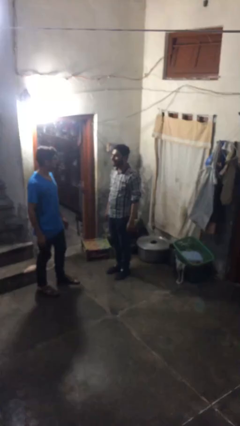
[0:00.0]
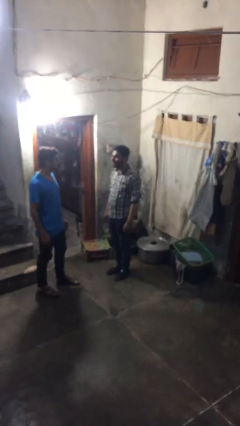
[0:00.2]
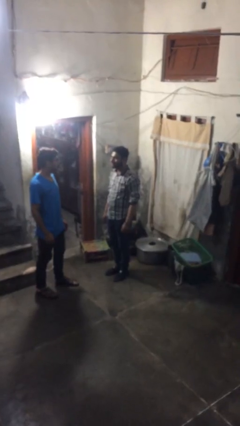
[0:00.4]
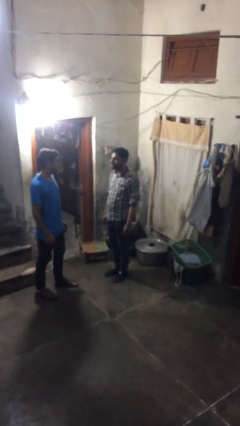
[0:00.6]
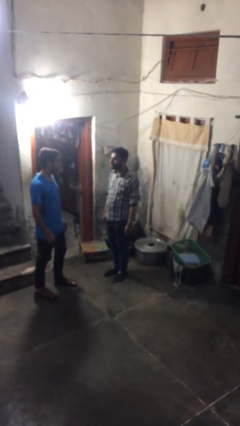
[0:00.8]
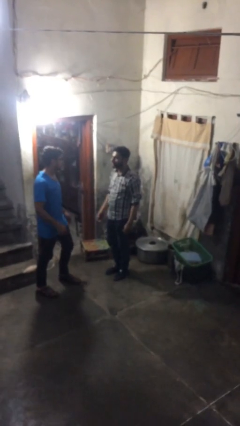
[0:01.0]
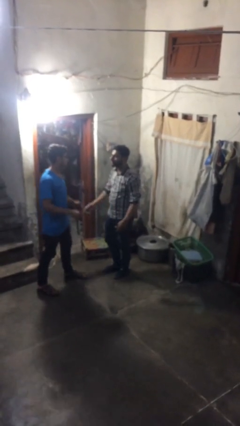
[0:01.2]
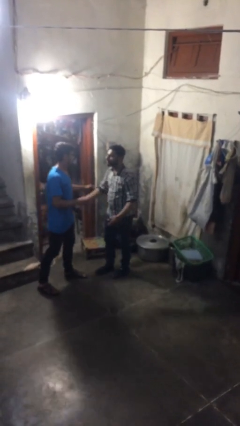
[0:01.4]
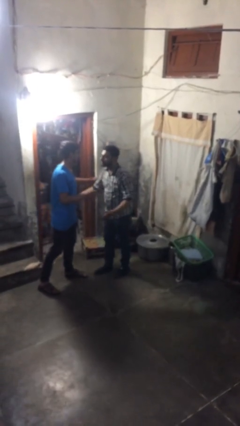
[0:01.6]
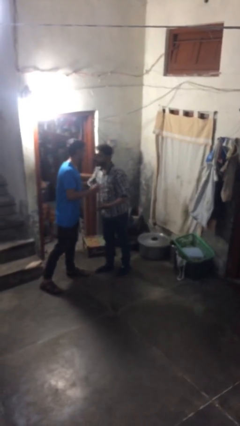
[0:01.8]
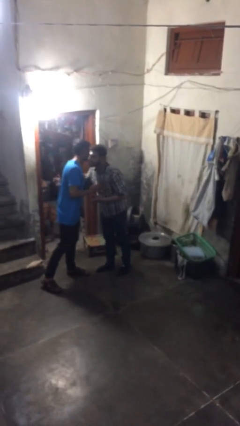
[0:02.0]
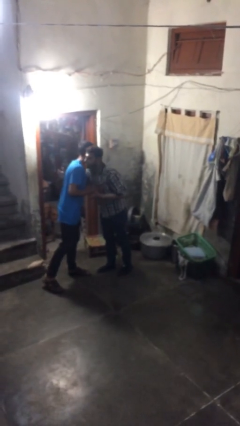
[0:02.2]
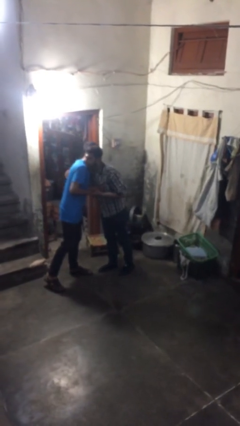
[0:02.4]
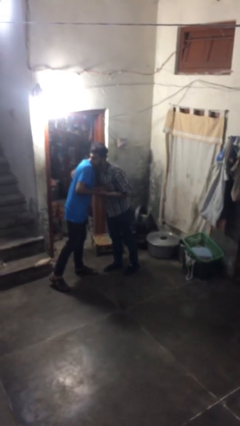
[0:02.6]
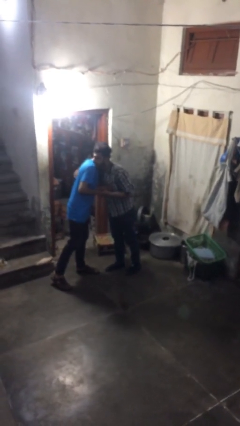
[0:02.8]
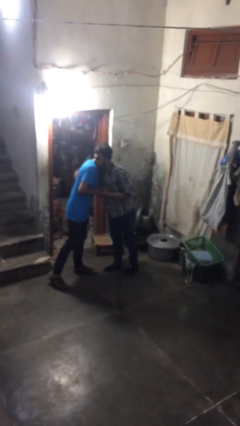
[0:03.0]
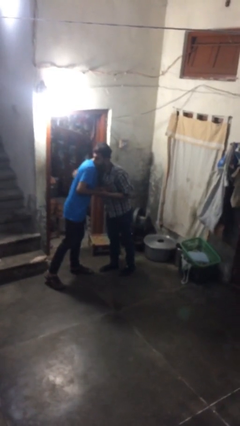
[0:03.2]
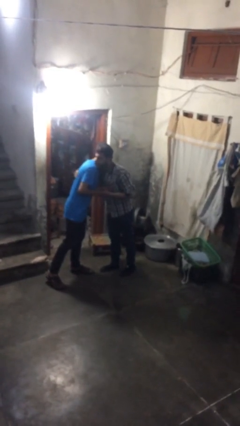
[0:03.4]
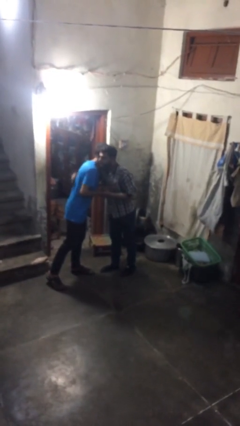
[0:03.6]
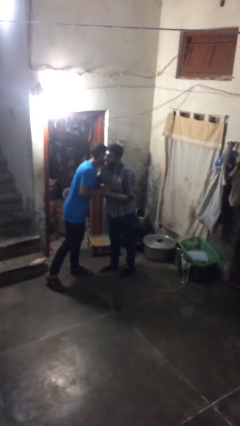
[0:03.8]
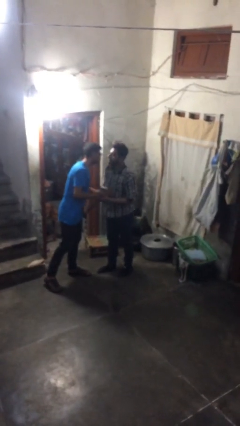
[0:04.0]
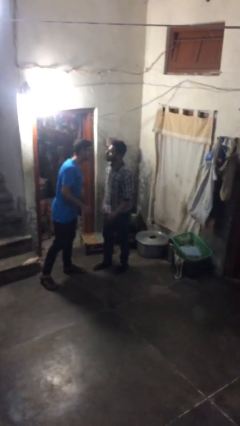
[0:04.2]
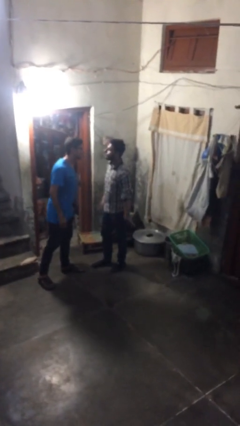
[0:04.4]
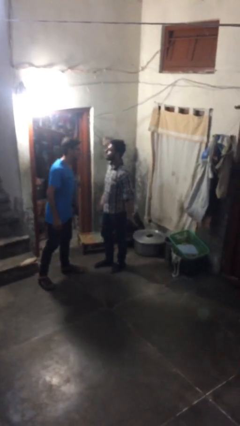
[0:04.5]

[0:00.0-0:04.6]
person embraces person

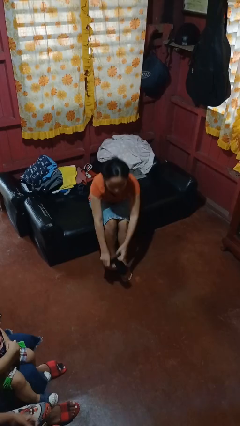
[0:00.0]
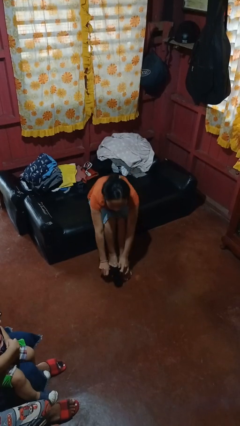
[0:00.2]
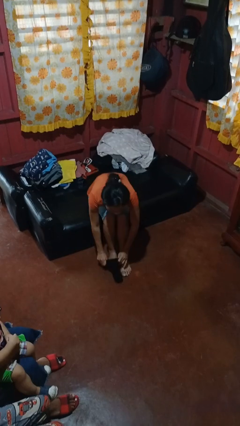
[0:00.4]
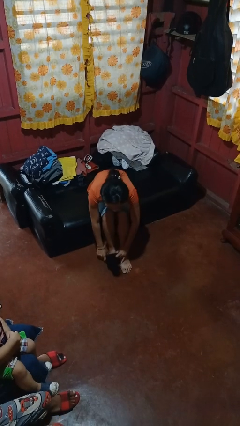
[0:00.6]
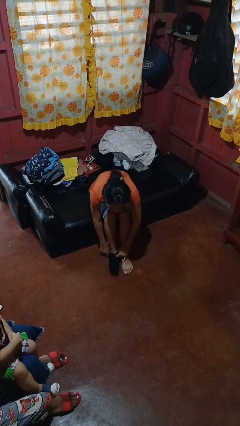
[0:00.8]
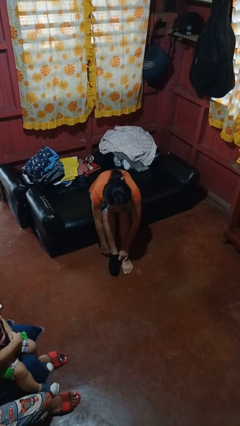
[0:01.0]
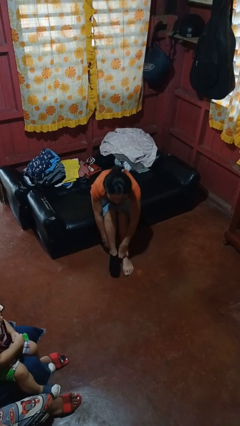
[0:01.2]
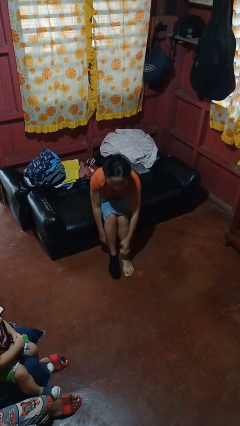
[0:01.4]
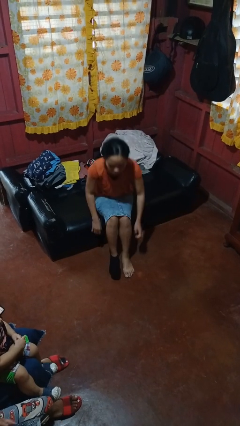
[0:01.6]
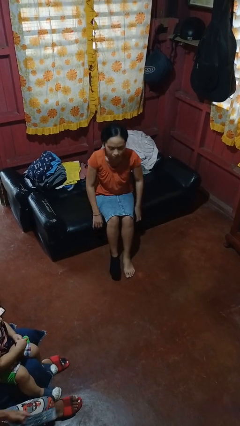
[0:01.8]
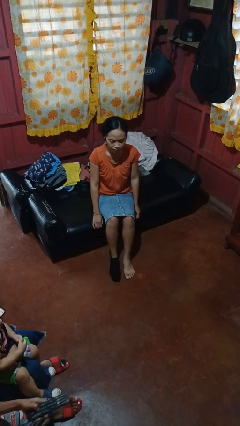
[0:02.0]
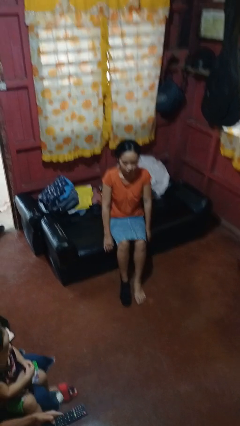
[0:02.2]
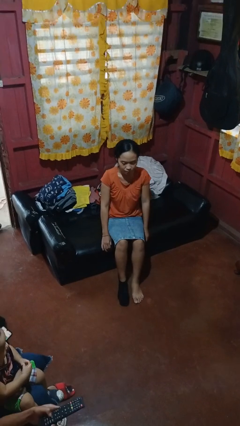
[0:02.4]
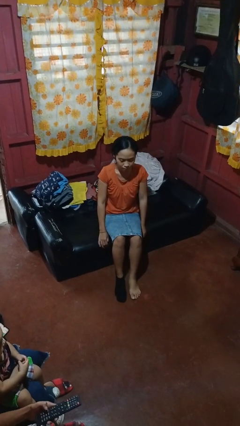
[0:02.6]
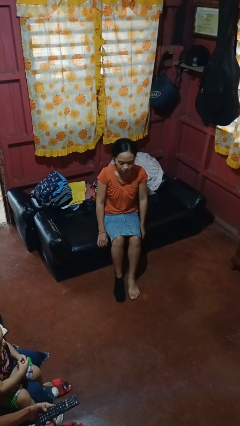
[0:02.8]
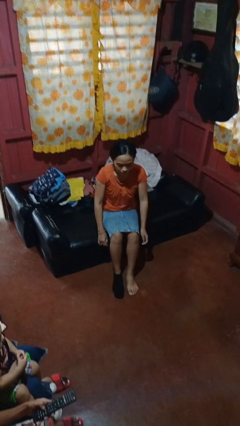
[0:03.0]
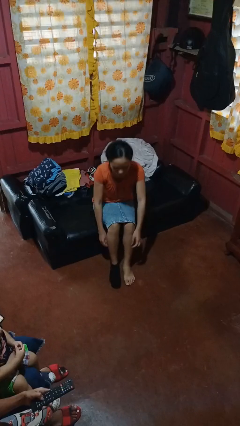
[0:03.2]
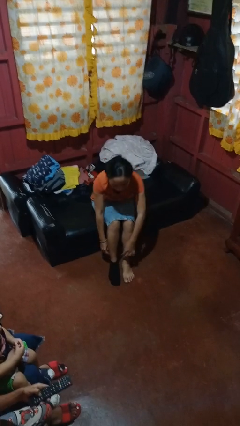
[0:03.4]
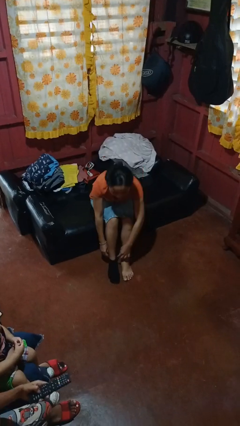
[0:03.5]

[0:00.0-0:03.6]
person puts on socks

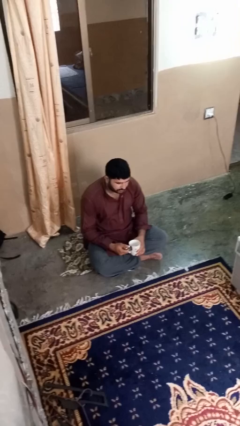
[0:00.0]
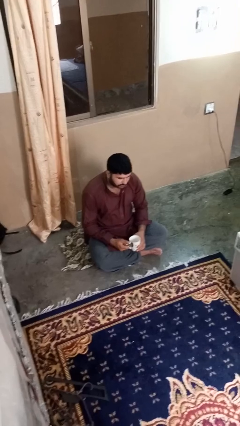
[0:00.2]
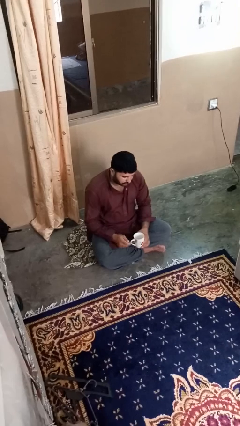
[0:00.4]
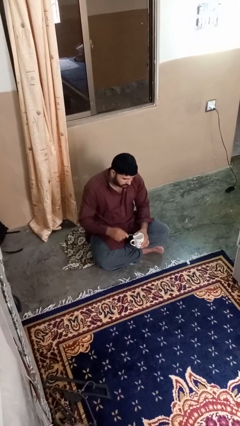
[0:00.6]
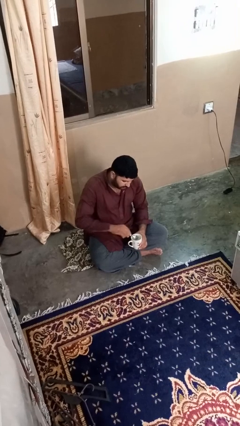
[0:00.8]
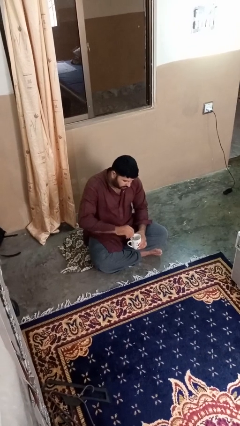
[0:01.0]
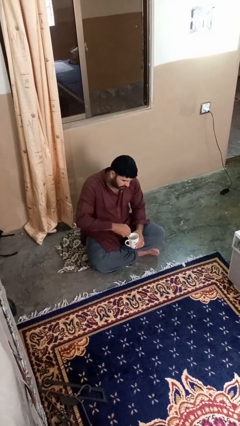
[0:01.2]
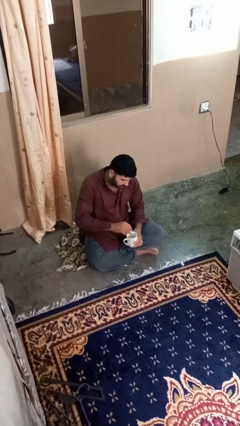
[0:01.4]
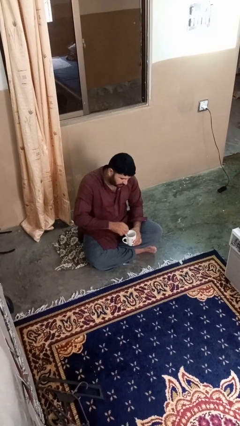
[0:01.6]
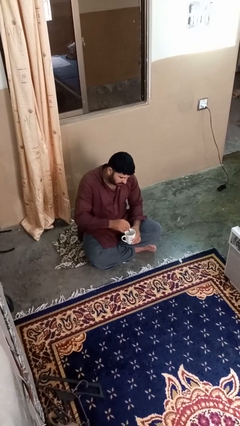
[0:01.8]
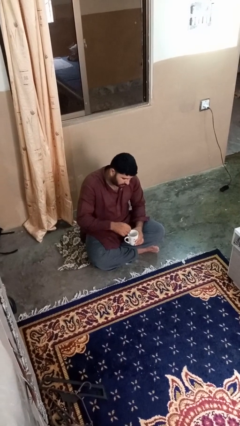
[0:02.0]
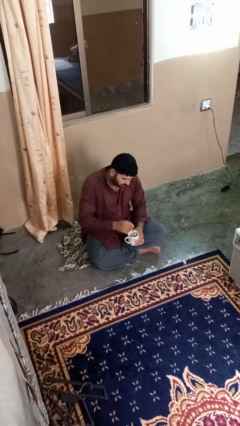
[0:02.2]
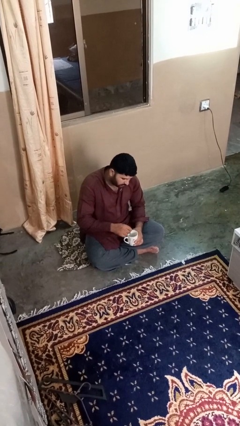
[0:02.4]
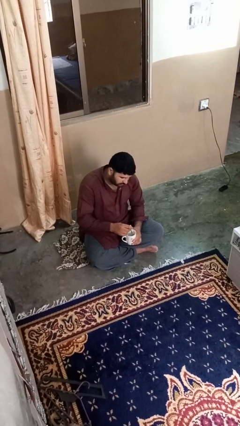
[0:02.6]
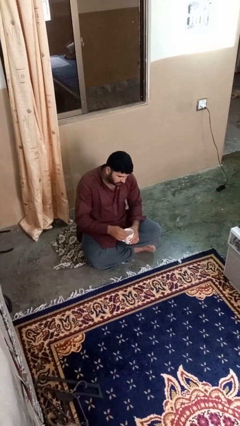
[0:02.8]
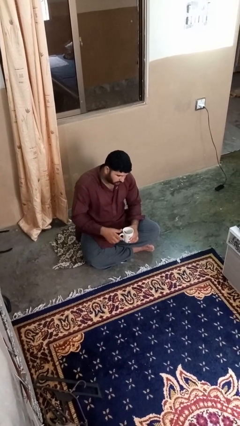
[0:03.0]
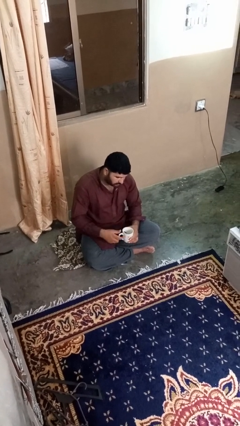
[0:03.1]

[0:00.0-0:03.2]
person stirs mug

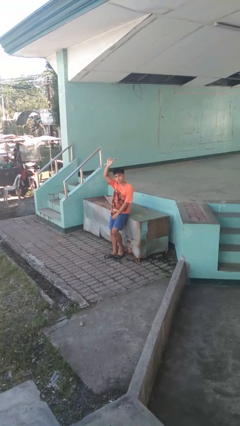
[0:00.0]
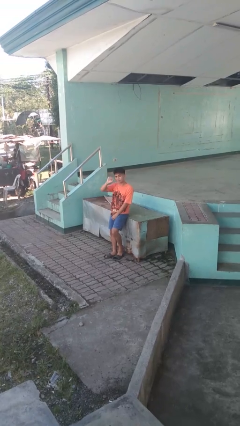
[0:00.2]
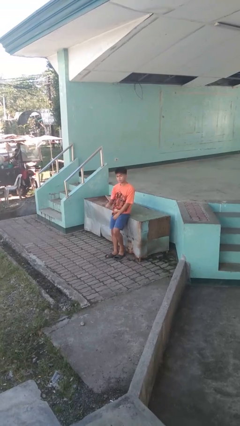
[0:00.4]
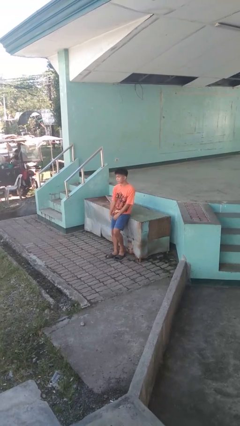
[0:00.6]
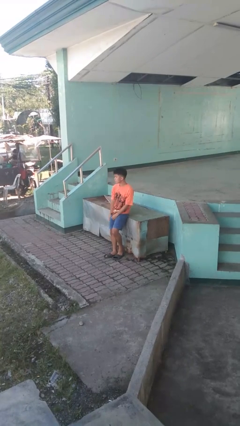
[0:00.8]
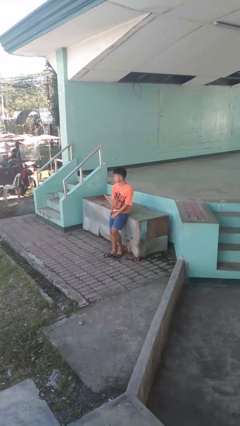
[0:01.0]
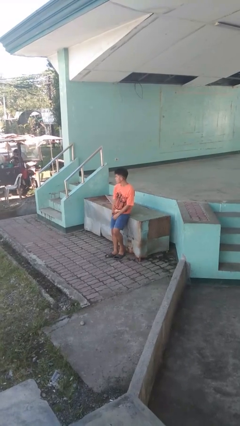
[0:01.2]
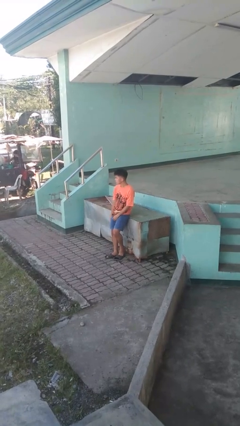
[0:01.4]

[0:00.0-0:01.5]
person gestures lower hand

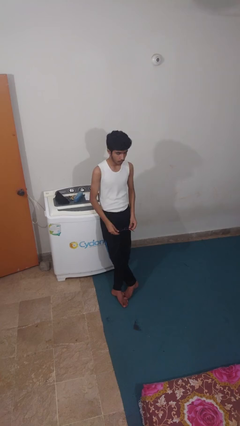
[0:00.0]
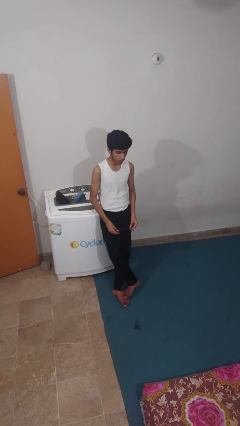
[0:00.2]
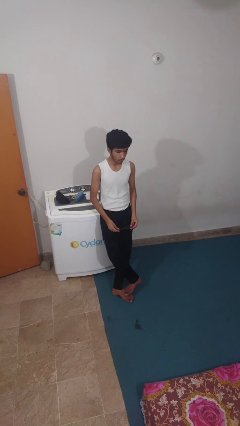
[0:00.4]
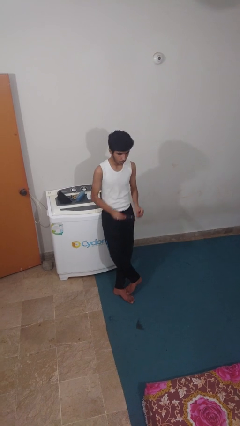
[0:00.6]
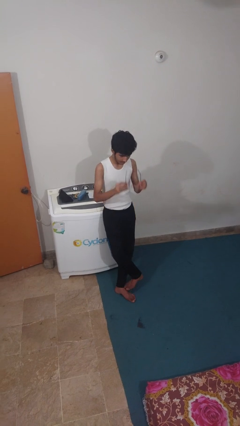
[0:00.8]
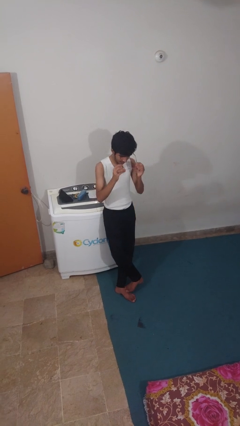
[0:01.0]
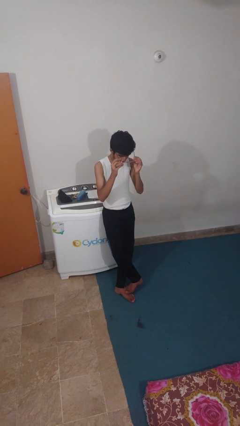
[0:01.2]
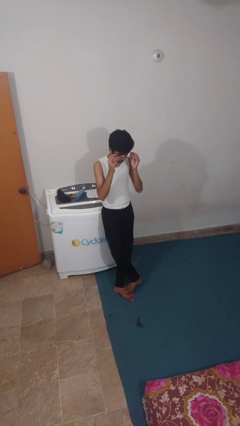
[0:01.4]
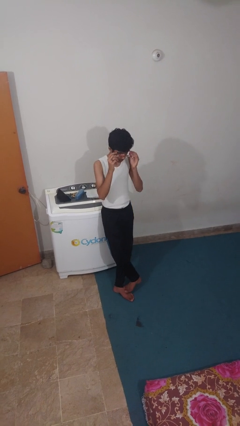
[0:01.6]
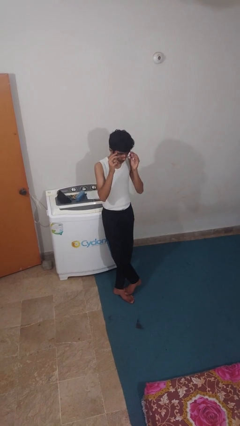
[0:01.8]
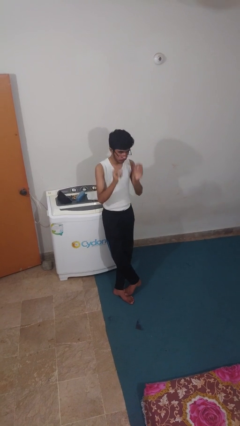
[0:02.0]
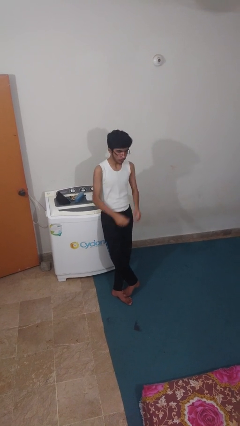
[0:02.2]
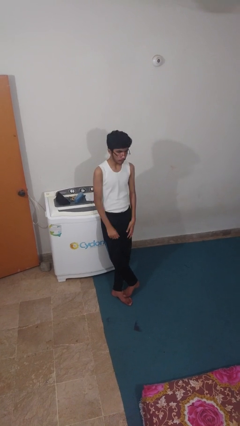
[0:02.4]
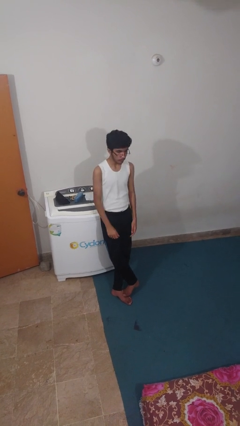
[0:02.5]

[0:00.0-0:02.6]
person puts on glasses

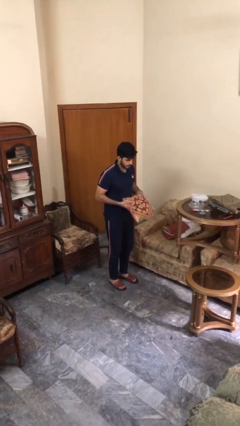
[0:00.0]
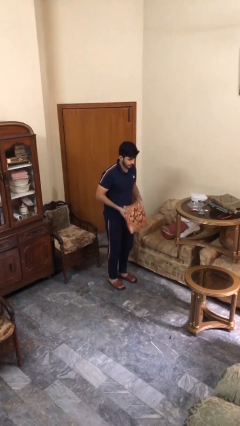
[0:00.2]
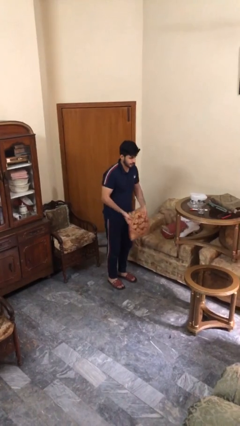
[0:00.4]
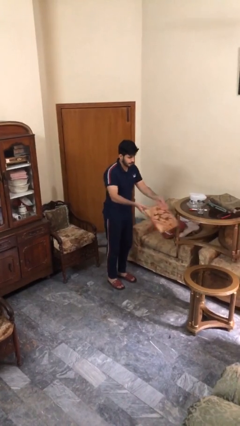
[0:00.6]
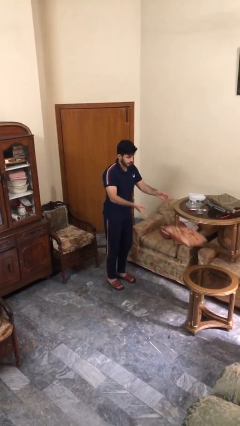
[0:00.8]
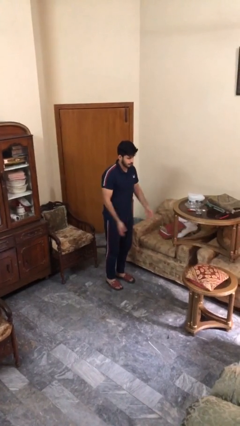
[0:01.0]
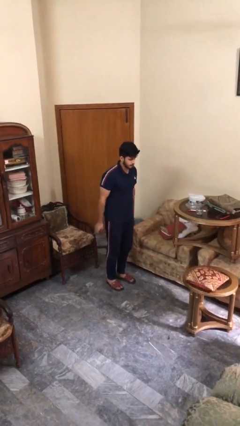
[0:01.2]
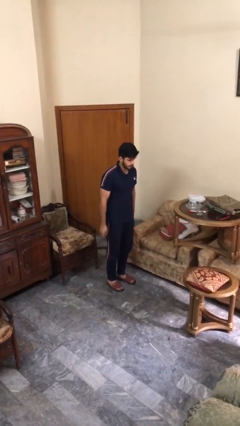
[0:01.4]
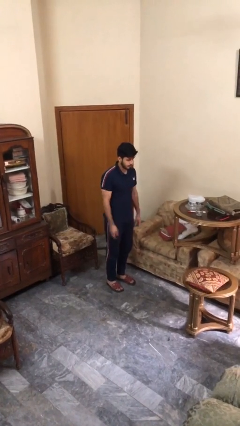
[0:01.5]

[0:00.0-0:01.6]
person throws object on table
